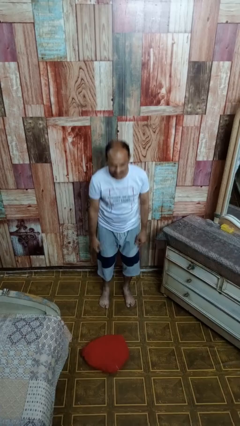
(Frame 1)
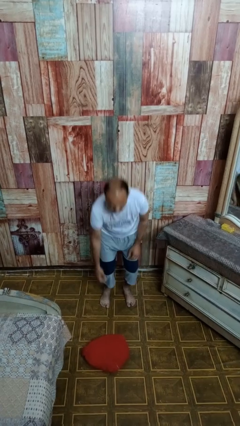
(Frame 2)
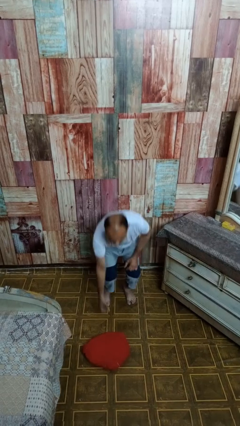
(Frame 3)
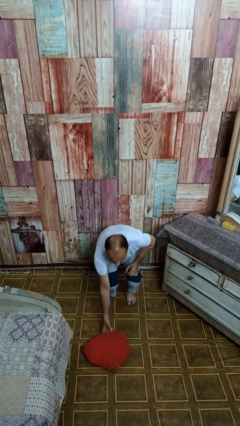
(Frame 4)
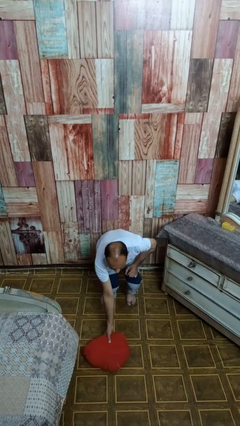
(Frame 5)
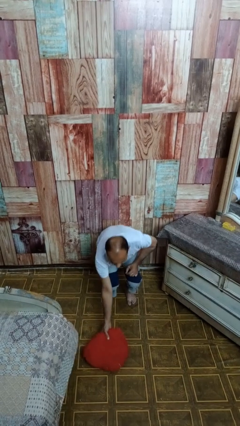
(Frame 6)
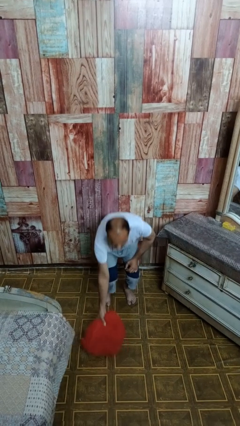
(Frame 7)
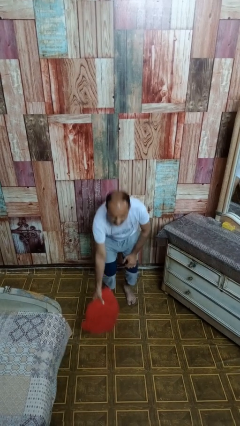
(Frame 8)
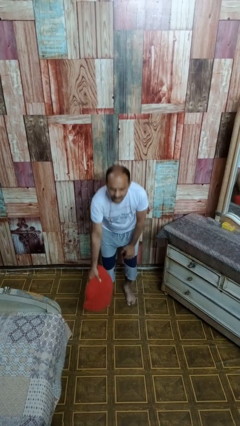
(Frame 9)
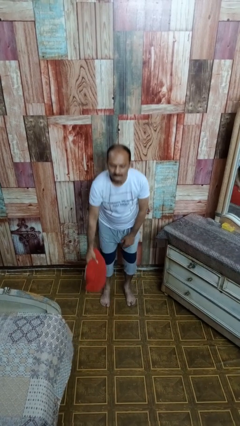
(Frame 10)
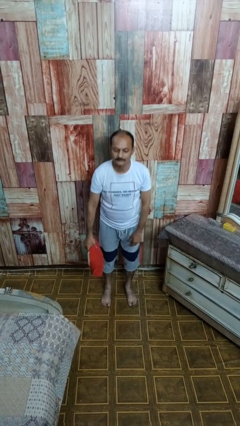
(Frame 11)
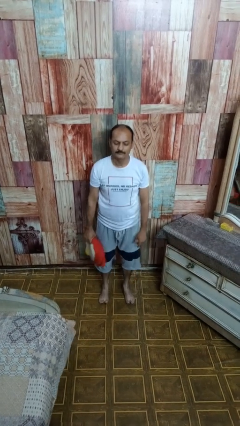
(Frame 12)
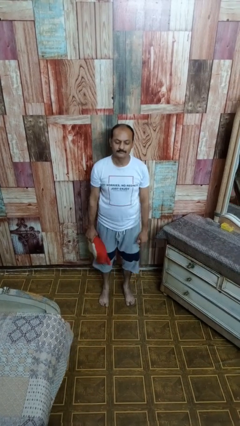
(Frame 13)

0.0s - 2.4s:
person picks up object from floor

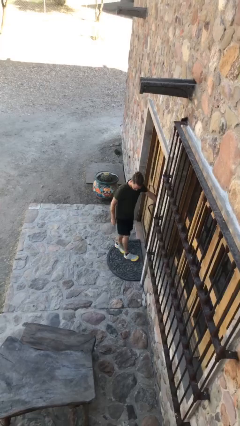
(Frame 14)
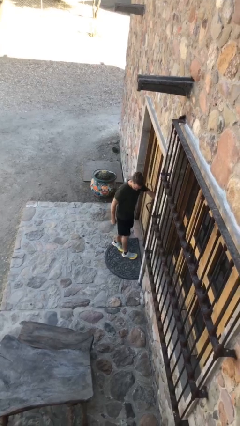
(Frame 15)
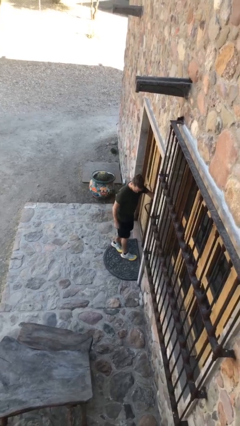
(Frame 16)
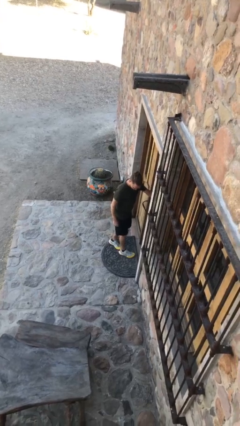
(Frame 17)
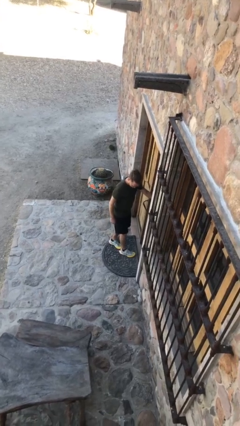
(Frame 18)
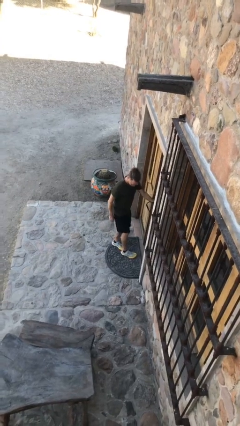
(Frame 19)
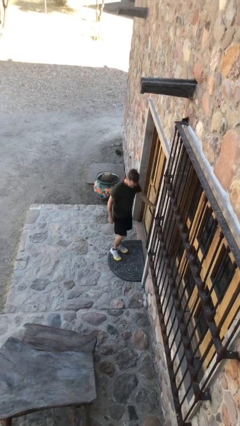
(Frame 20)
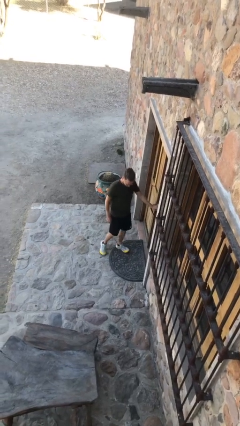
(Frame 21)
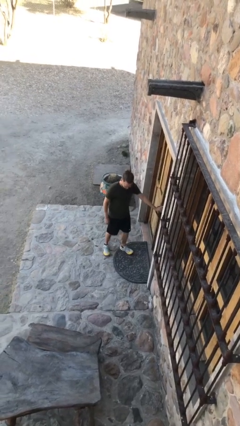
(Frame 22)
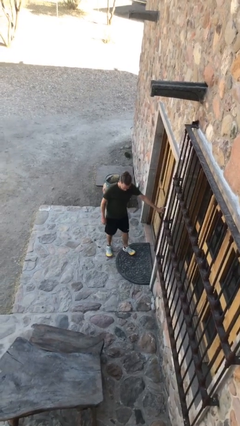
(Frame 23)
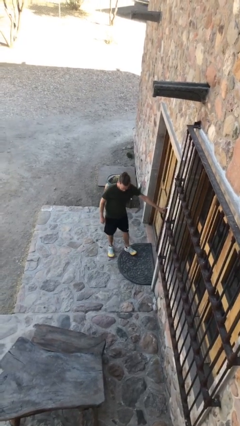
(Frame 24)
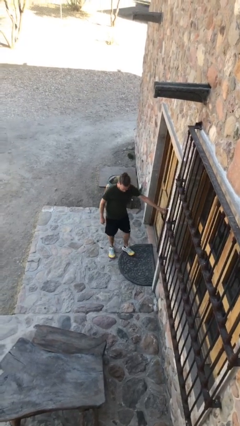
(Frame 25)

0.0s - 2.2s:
person closes facility door

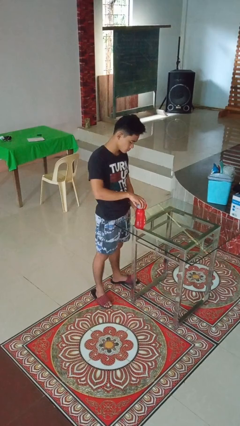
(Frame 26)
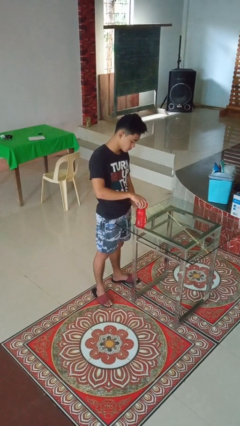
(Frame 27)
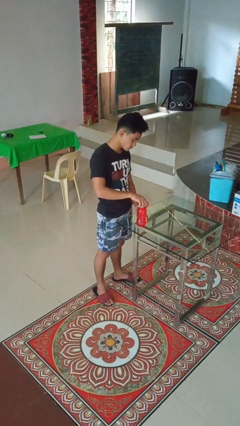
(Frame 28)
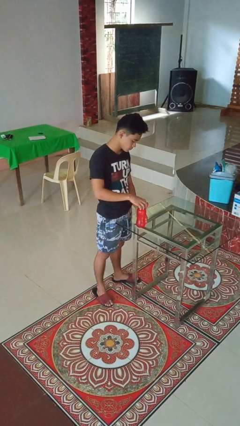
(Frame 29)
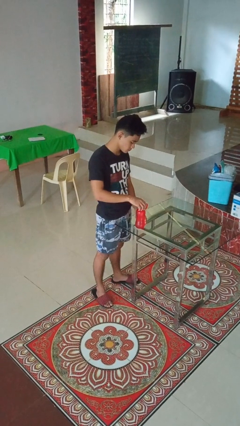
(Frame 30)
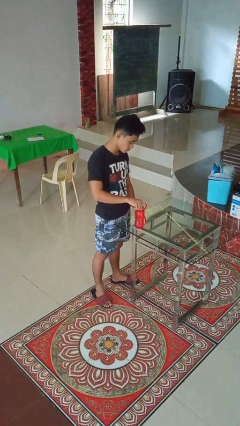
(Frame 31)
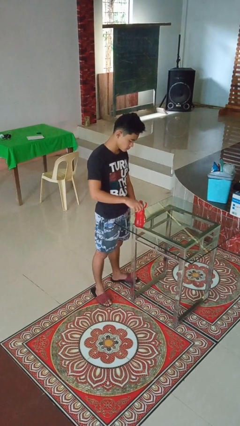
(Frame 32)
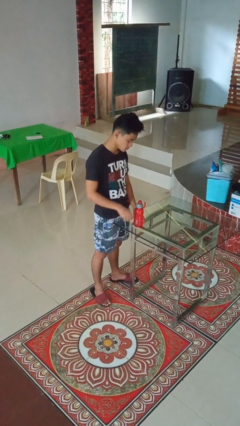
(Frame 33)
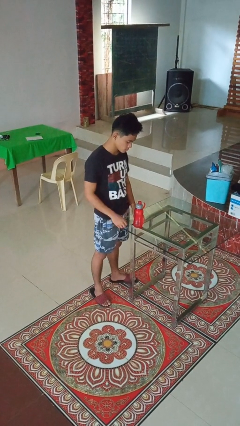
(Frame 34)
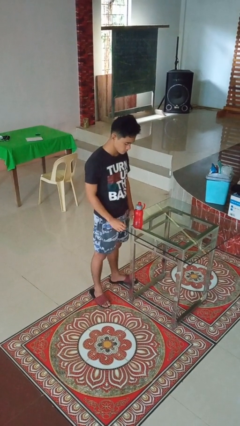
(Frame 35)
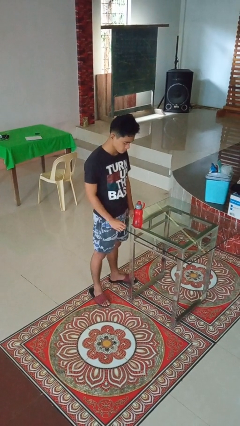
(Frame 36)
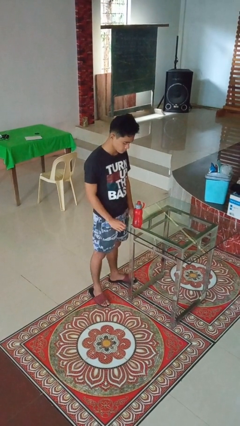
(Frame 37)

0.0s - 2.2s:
person screws lid to bottle

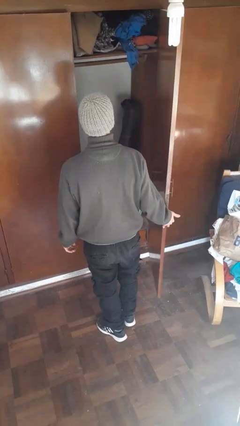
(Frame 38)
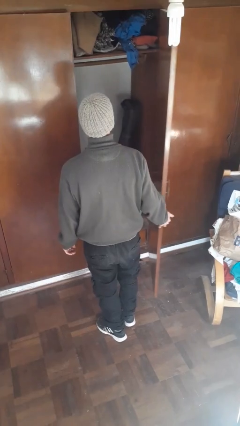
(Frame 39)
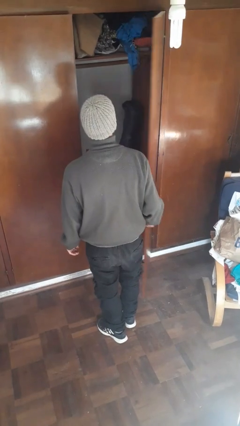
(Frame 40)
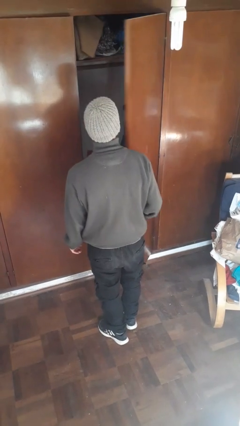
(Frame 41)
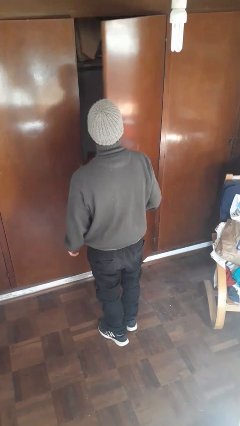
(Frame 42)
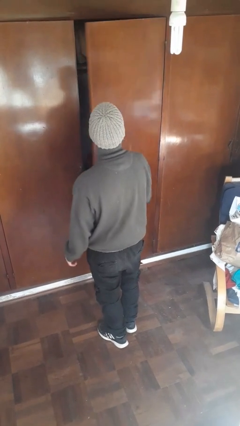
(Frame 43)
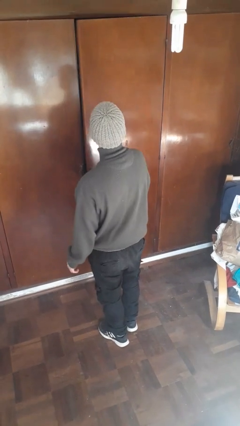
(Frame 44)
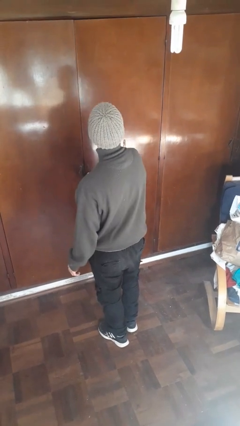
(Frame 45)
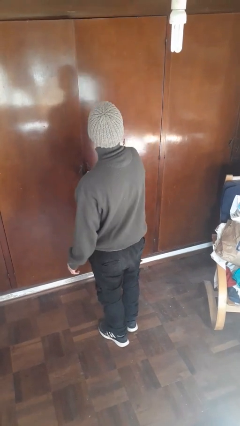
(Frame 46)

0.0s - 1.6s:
person closes closet door

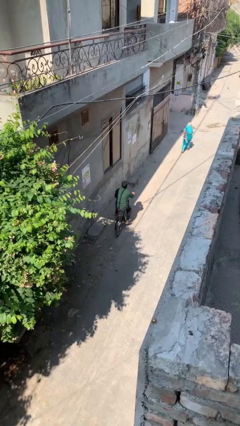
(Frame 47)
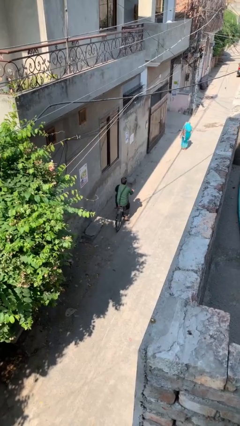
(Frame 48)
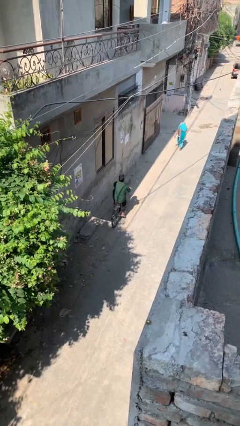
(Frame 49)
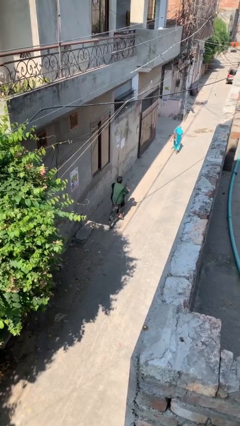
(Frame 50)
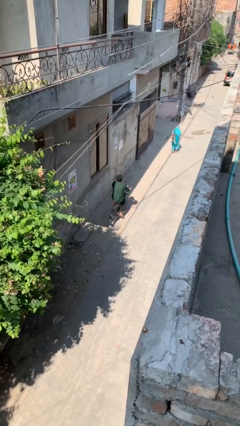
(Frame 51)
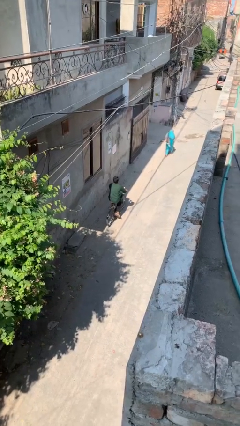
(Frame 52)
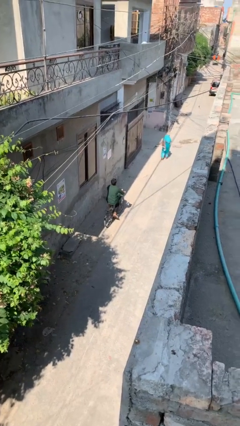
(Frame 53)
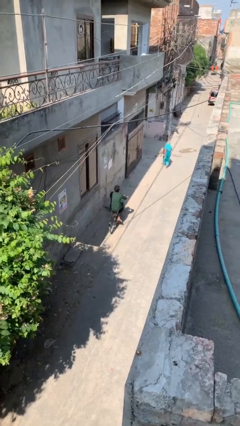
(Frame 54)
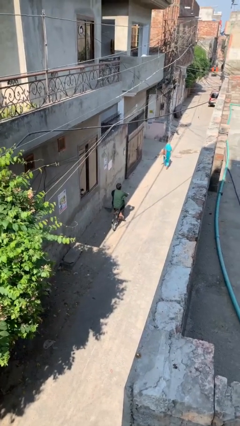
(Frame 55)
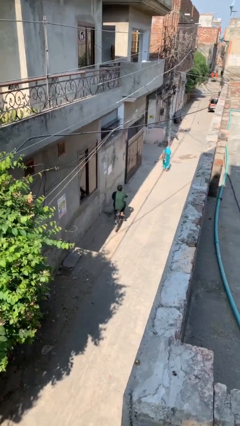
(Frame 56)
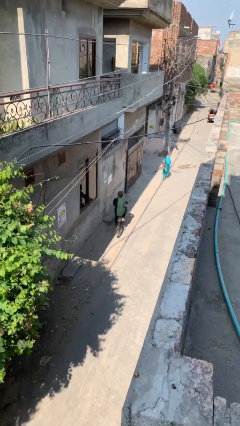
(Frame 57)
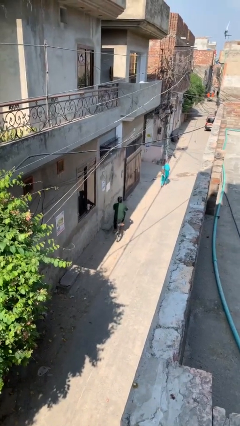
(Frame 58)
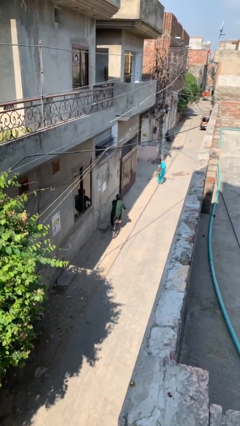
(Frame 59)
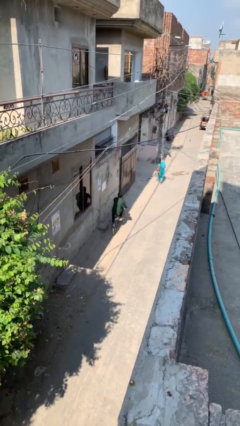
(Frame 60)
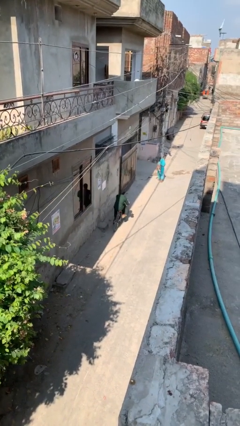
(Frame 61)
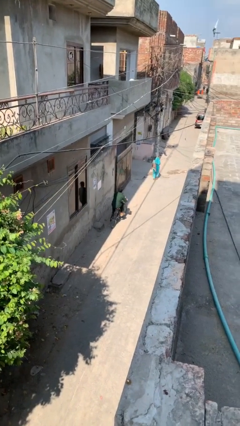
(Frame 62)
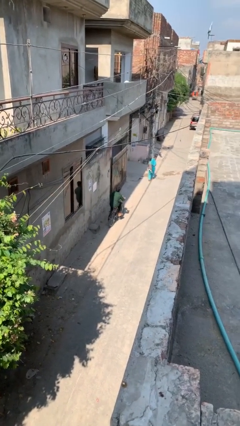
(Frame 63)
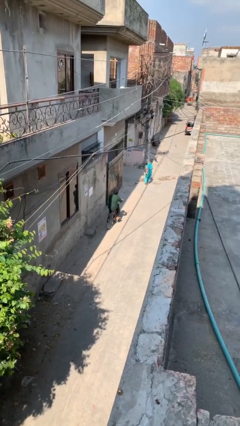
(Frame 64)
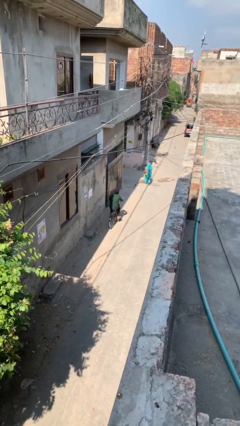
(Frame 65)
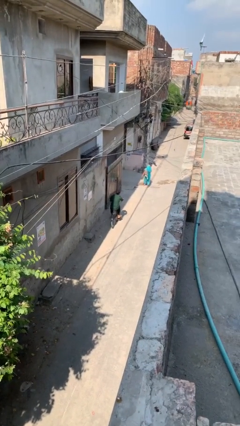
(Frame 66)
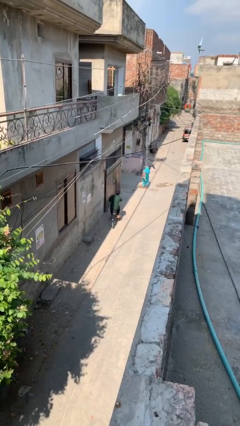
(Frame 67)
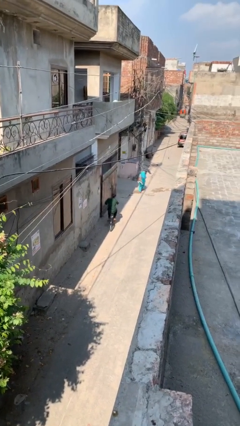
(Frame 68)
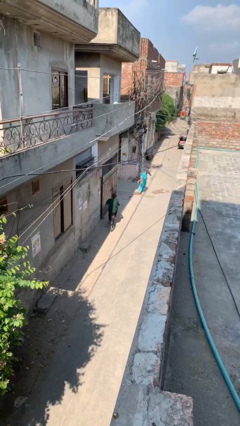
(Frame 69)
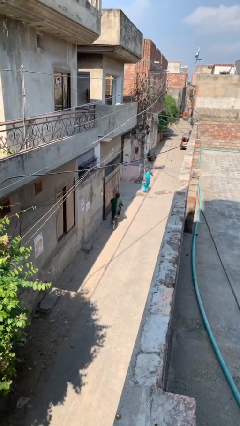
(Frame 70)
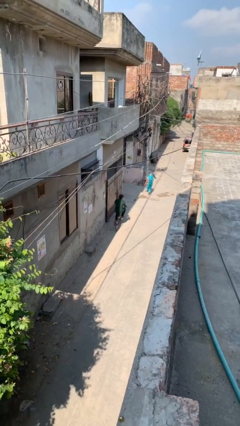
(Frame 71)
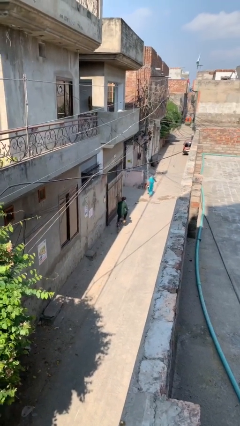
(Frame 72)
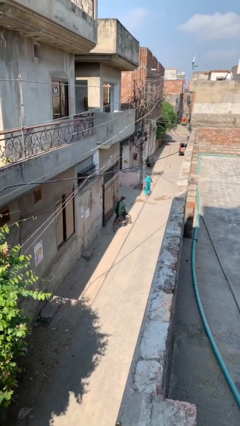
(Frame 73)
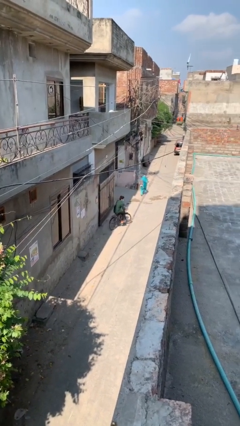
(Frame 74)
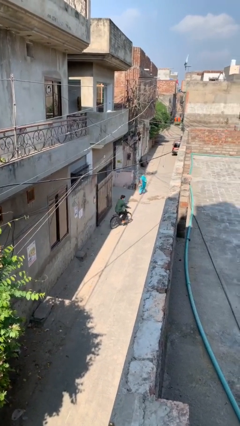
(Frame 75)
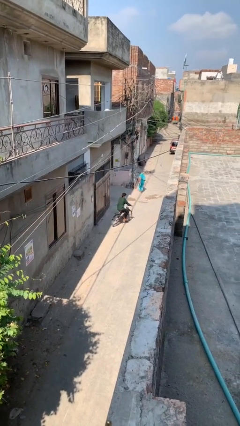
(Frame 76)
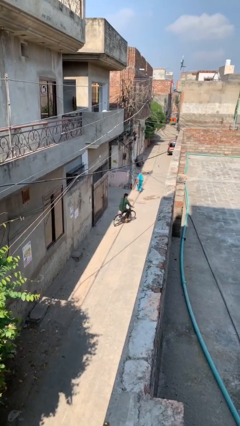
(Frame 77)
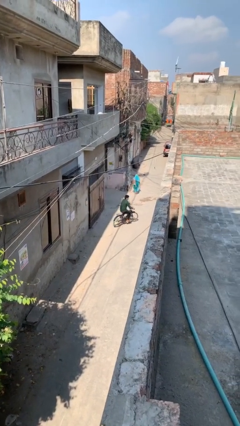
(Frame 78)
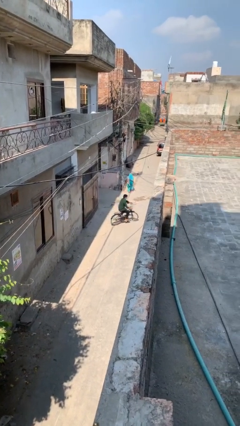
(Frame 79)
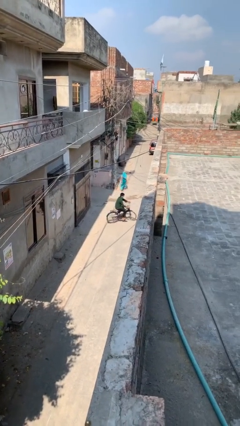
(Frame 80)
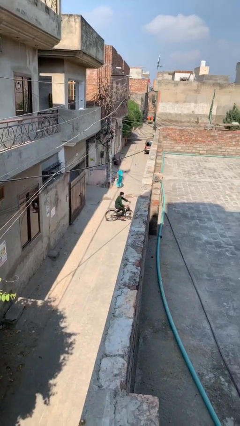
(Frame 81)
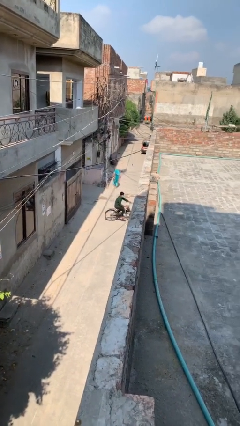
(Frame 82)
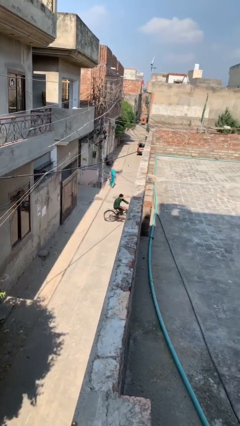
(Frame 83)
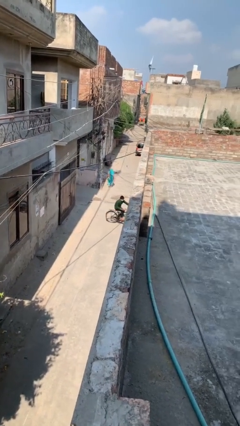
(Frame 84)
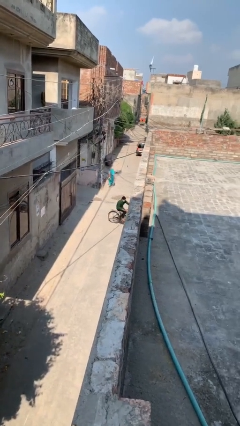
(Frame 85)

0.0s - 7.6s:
person rides bicycle

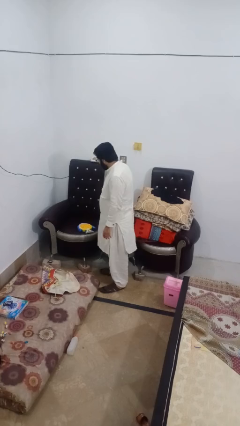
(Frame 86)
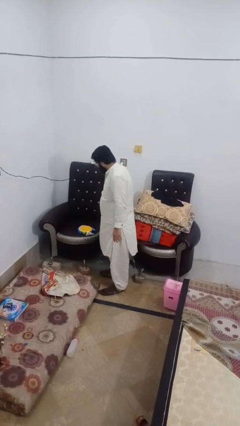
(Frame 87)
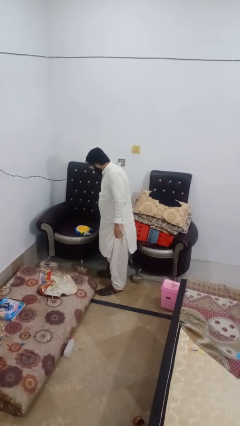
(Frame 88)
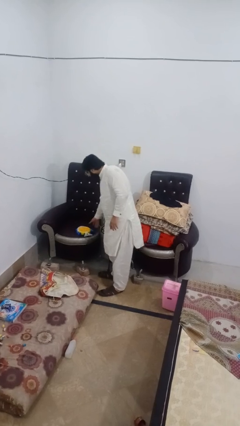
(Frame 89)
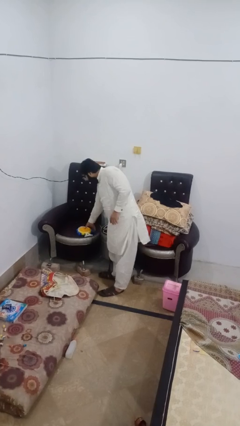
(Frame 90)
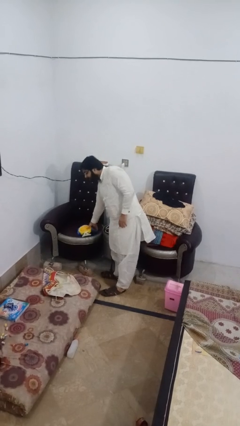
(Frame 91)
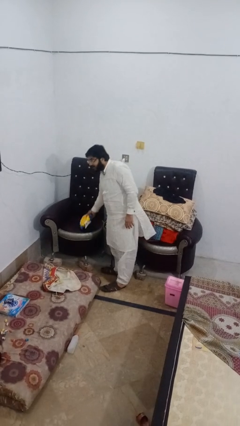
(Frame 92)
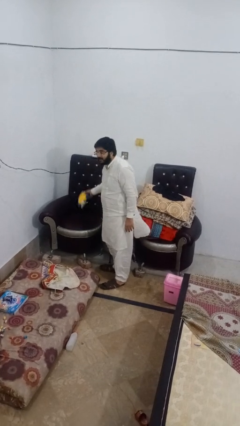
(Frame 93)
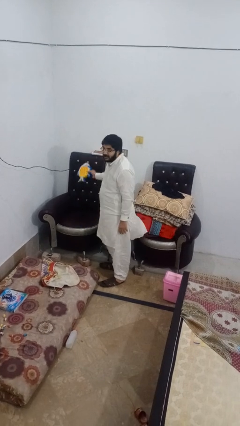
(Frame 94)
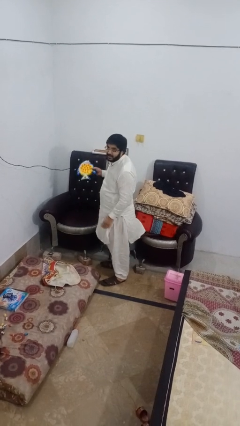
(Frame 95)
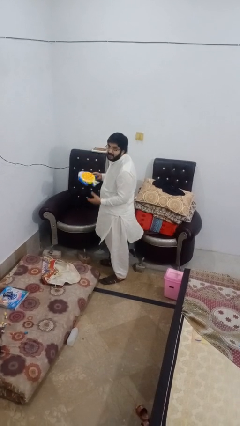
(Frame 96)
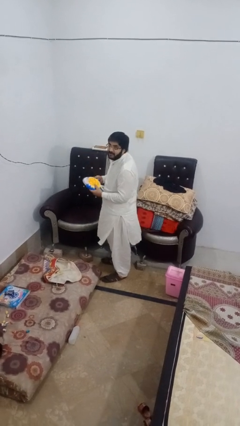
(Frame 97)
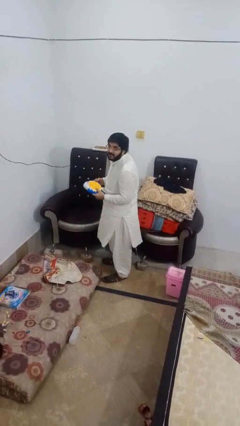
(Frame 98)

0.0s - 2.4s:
person picks up object from couch
